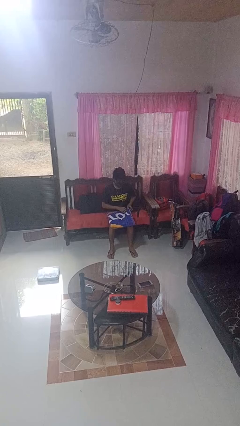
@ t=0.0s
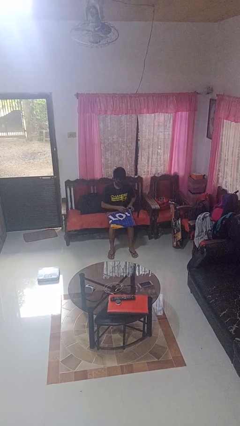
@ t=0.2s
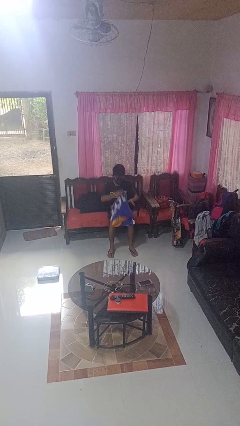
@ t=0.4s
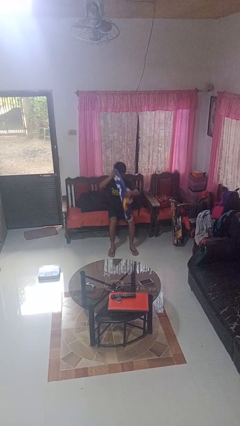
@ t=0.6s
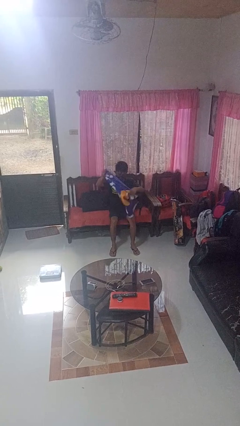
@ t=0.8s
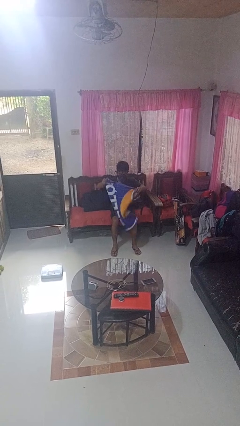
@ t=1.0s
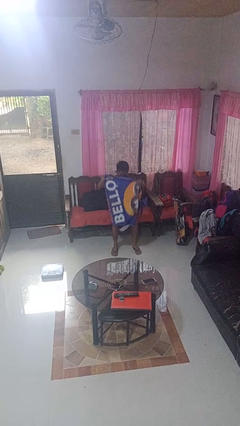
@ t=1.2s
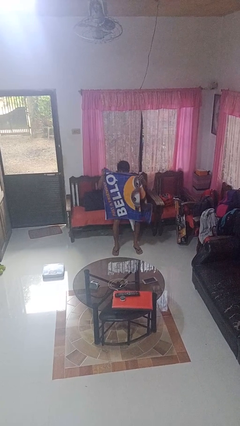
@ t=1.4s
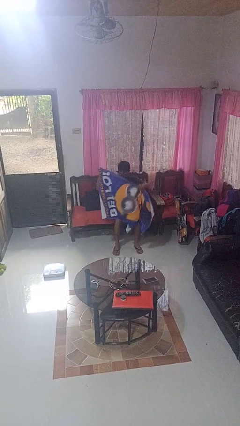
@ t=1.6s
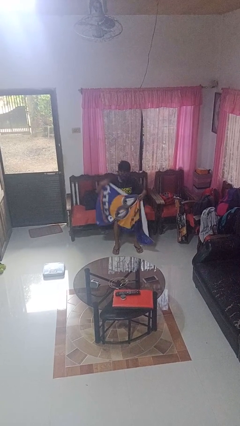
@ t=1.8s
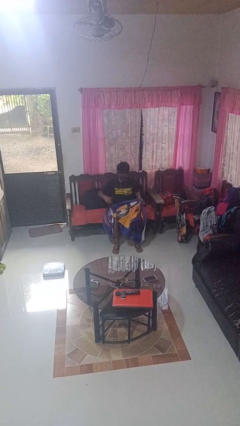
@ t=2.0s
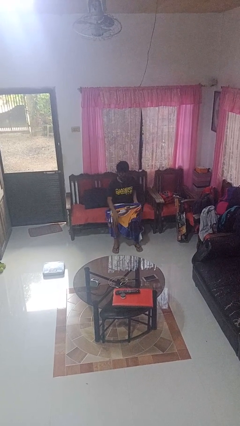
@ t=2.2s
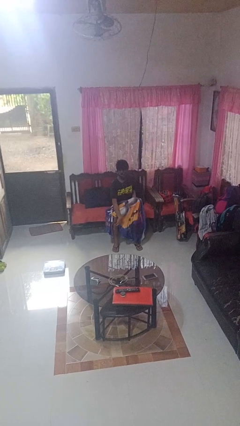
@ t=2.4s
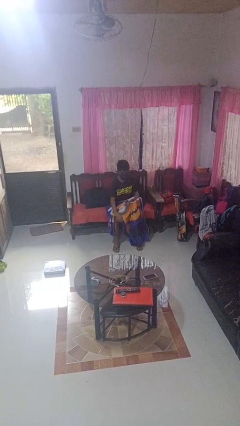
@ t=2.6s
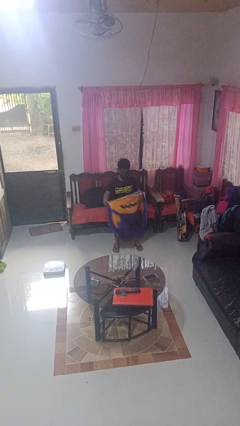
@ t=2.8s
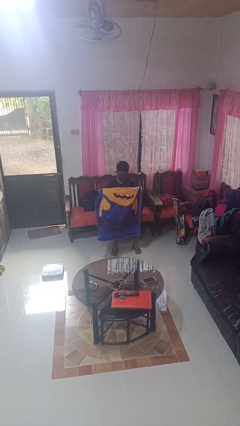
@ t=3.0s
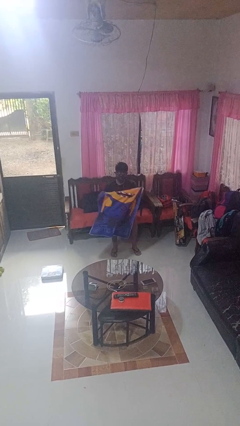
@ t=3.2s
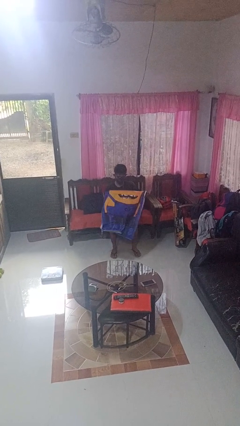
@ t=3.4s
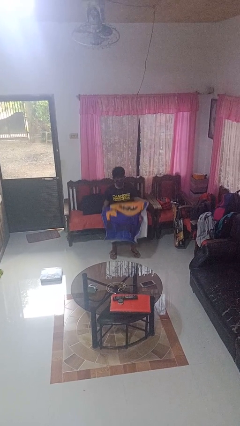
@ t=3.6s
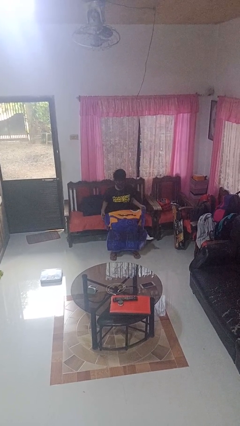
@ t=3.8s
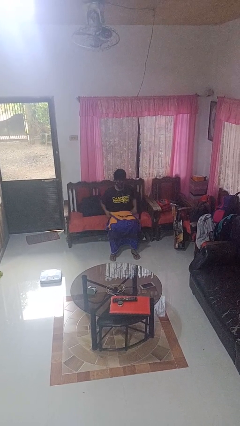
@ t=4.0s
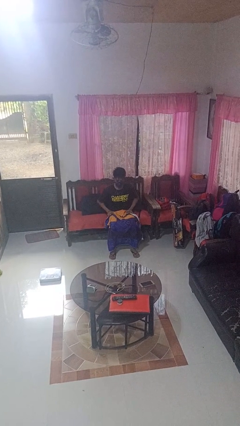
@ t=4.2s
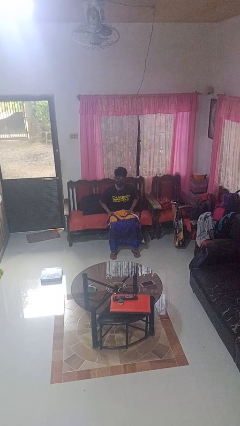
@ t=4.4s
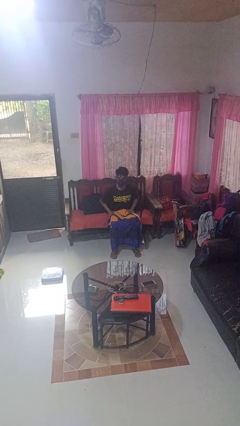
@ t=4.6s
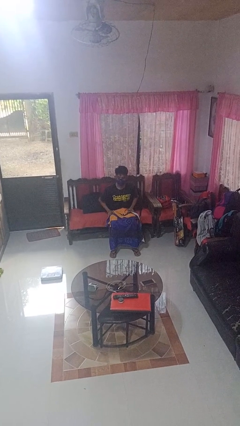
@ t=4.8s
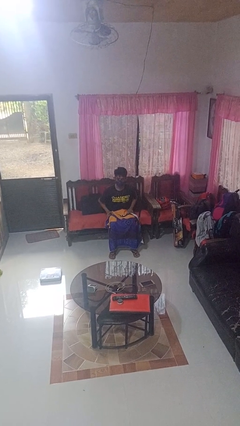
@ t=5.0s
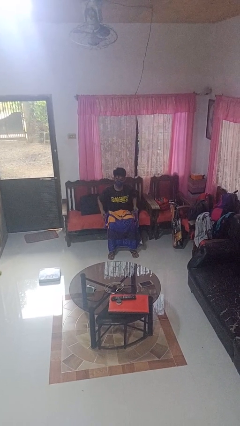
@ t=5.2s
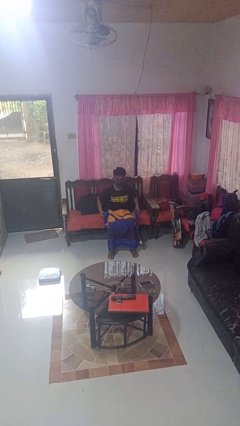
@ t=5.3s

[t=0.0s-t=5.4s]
person folds towel

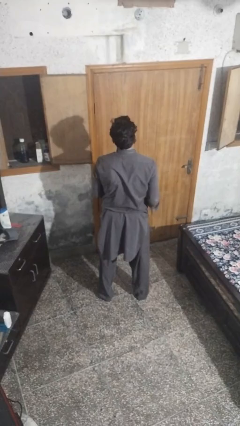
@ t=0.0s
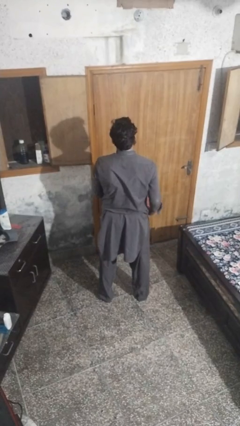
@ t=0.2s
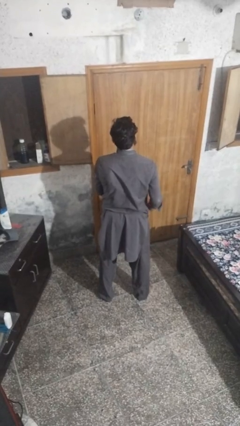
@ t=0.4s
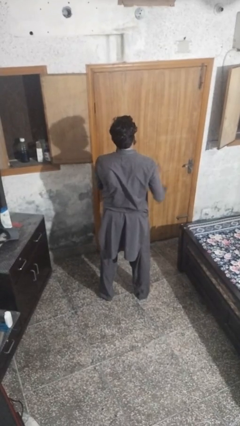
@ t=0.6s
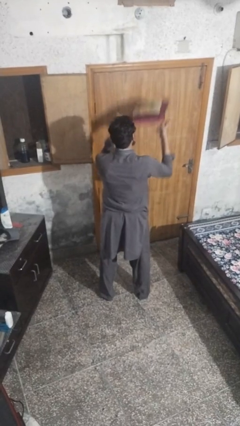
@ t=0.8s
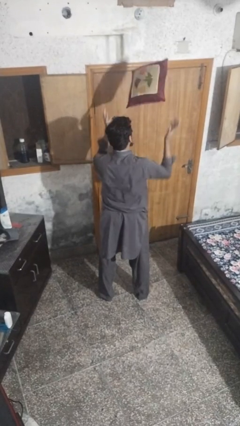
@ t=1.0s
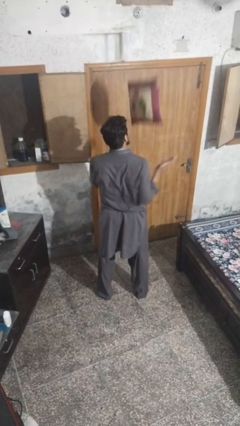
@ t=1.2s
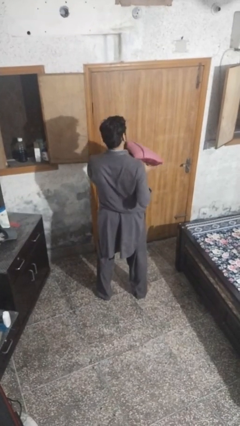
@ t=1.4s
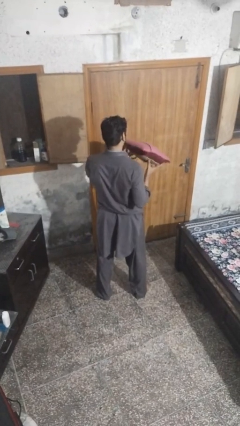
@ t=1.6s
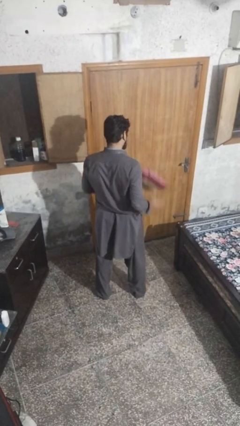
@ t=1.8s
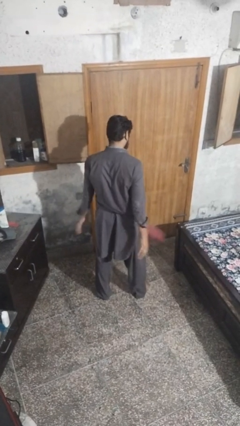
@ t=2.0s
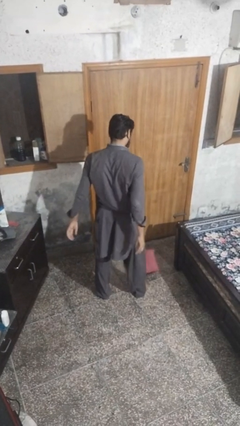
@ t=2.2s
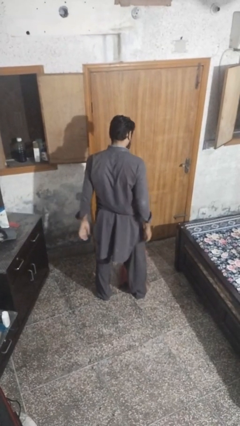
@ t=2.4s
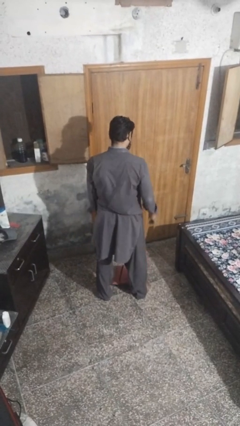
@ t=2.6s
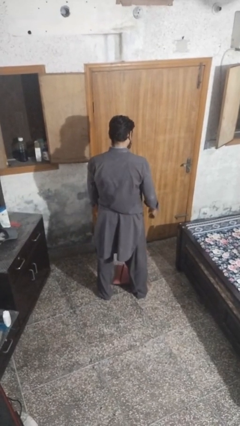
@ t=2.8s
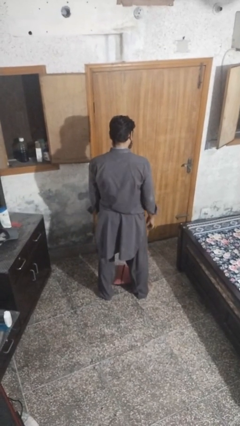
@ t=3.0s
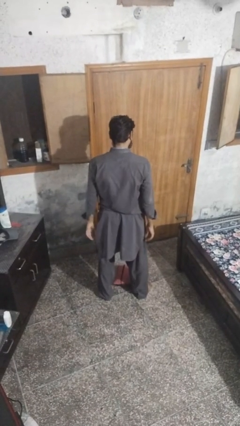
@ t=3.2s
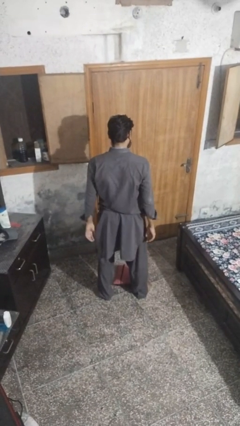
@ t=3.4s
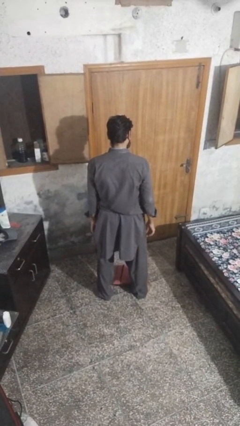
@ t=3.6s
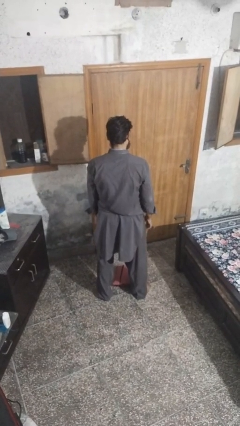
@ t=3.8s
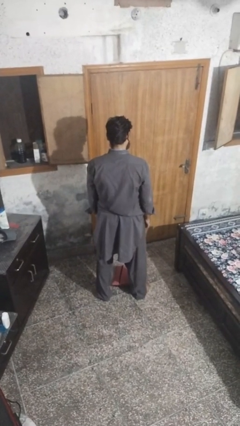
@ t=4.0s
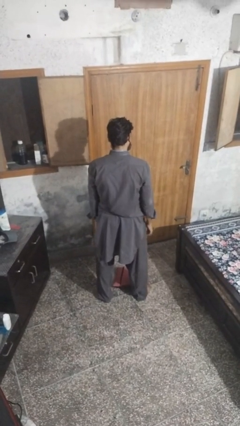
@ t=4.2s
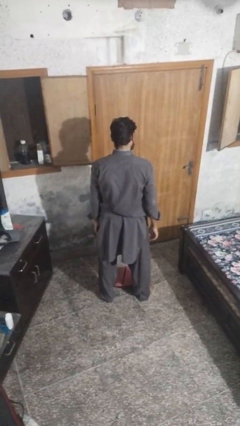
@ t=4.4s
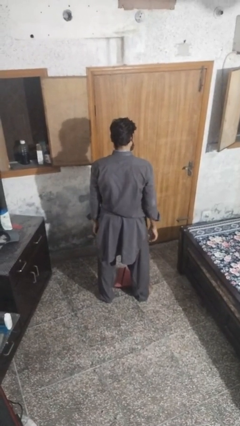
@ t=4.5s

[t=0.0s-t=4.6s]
person throws object into air

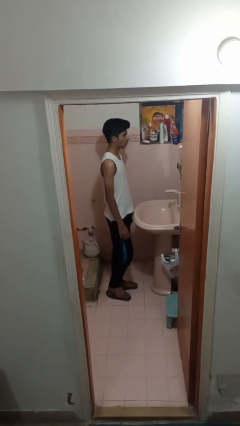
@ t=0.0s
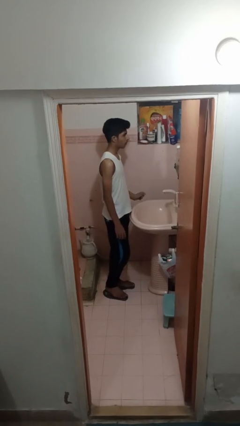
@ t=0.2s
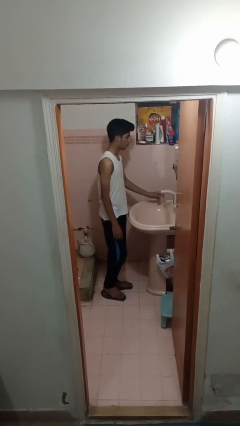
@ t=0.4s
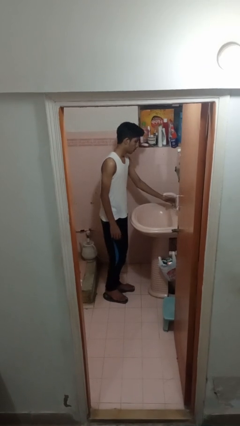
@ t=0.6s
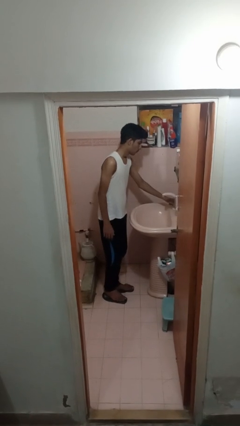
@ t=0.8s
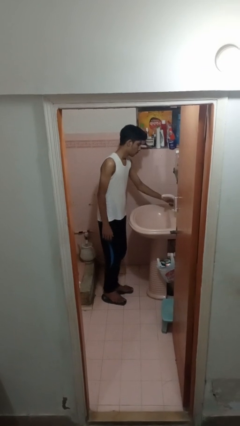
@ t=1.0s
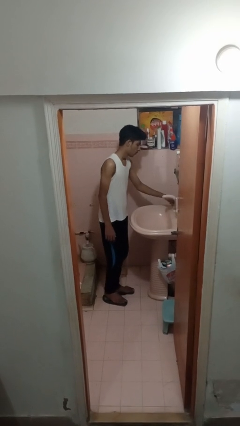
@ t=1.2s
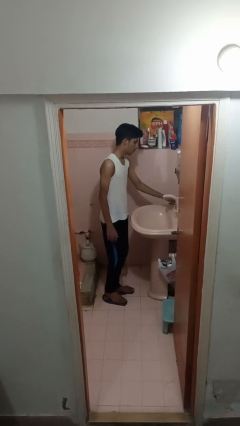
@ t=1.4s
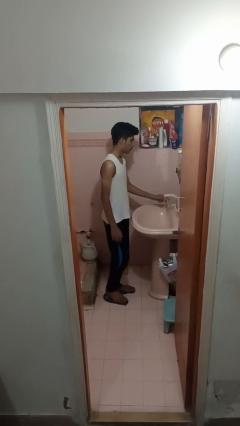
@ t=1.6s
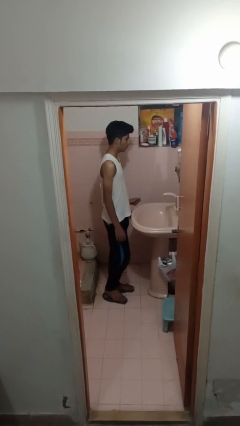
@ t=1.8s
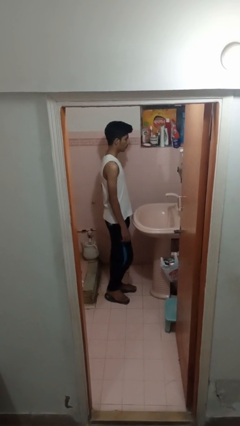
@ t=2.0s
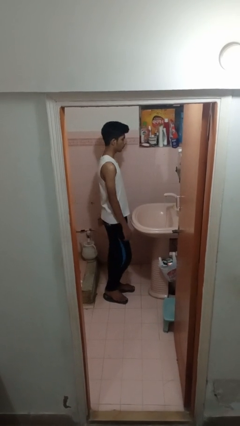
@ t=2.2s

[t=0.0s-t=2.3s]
person turns on faucet

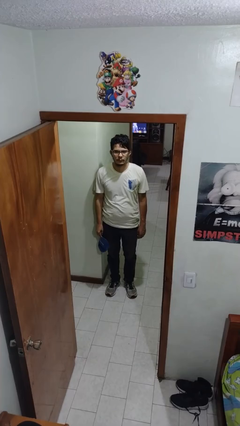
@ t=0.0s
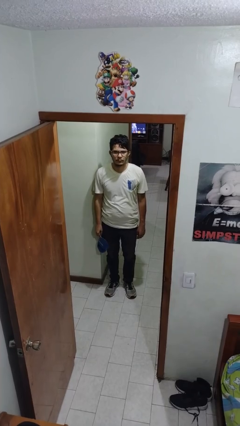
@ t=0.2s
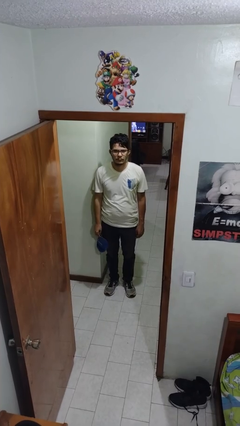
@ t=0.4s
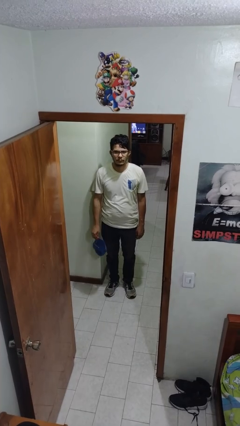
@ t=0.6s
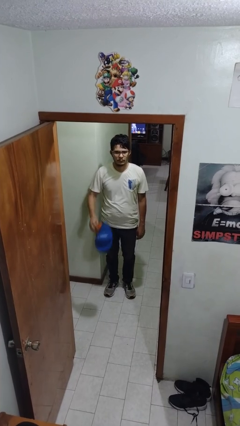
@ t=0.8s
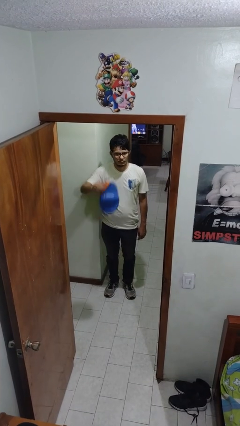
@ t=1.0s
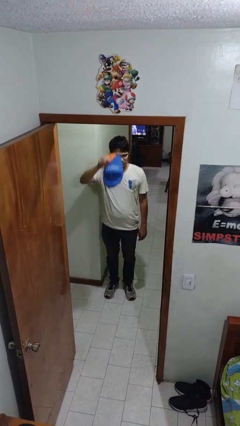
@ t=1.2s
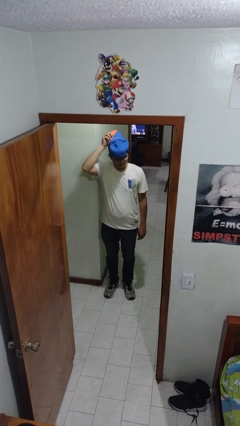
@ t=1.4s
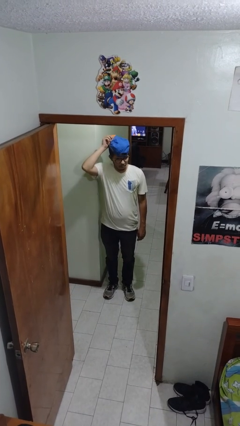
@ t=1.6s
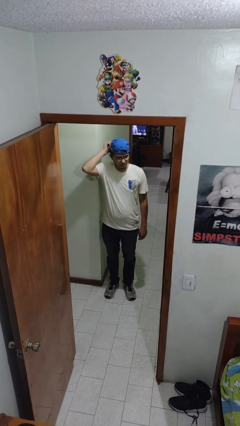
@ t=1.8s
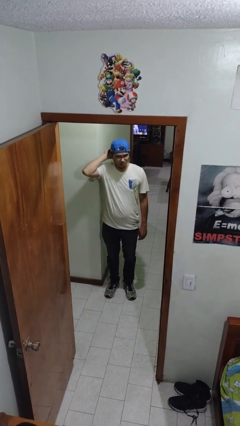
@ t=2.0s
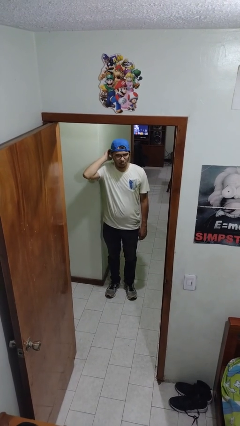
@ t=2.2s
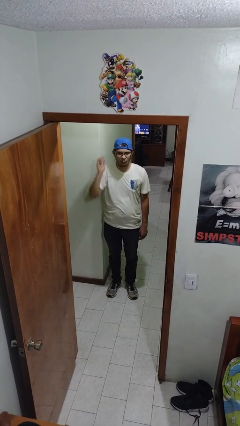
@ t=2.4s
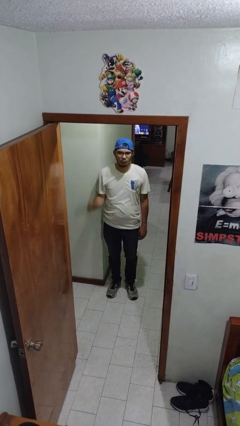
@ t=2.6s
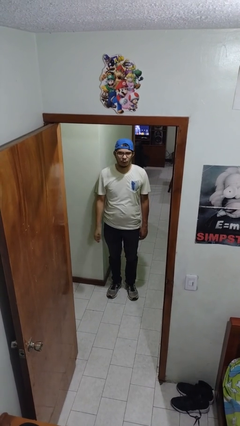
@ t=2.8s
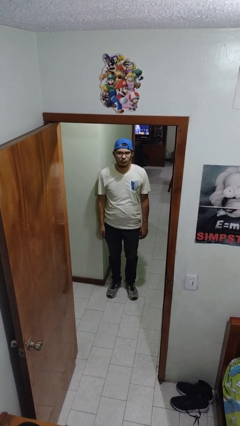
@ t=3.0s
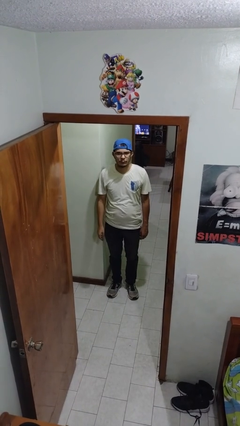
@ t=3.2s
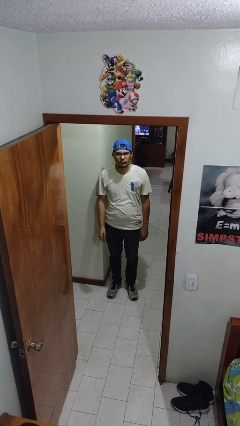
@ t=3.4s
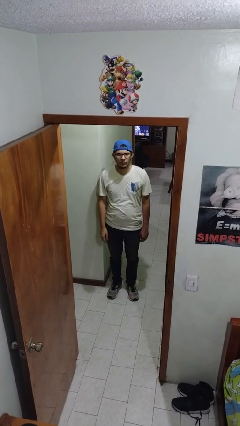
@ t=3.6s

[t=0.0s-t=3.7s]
person puts on hat

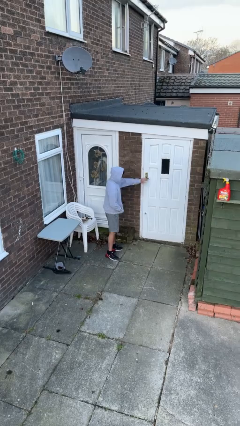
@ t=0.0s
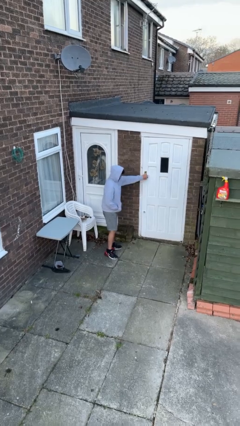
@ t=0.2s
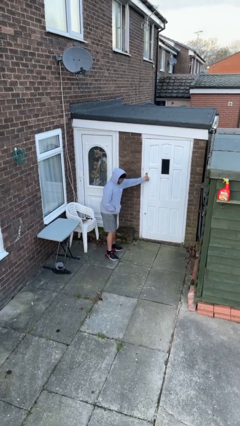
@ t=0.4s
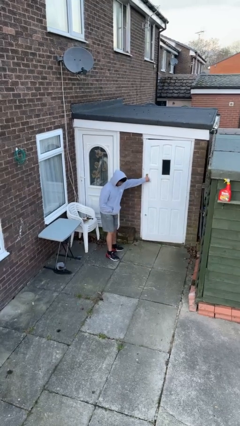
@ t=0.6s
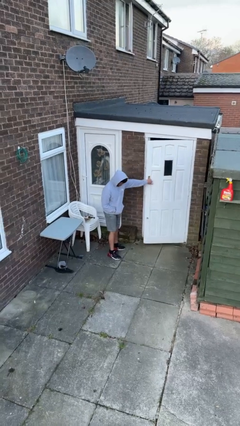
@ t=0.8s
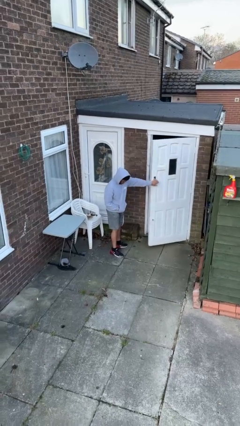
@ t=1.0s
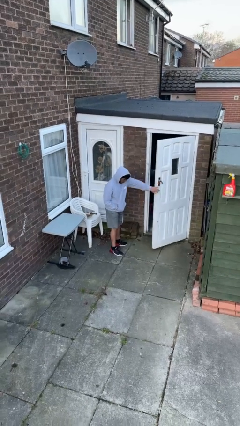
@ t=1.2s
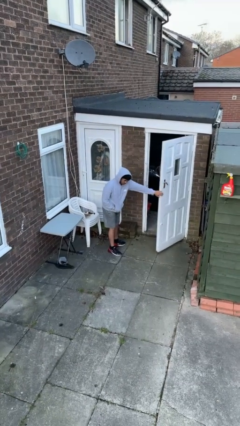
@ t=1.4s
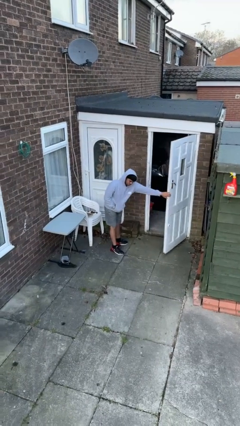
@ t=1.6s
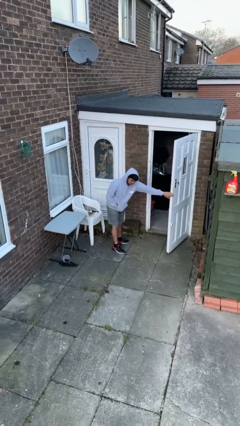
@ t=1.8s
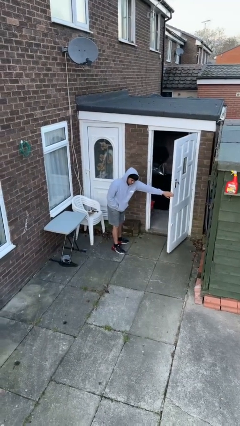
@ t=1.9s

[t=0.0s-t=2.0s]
person opens facility door
